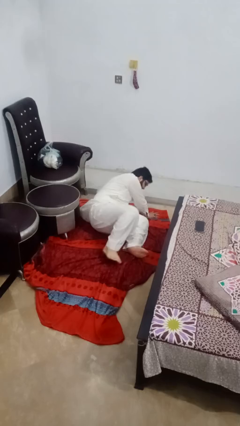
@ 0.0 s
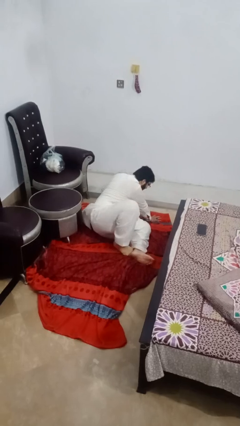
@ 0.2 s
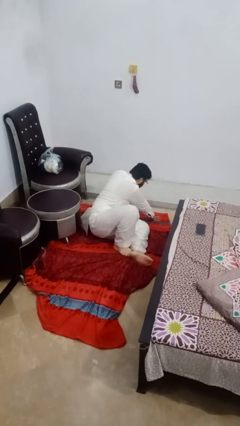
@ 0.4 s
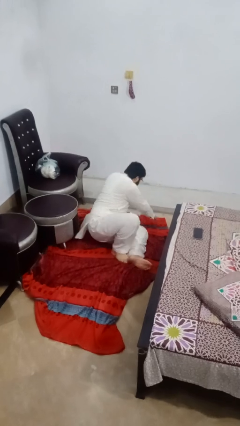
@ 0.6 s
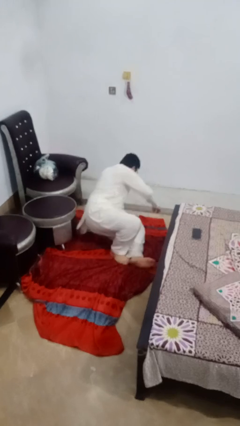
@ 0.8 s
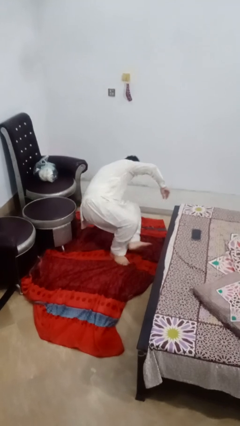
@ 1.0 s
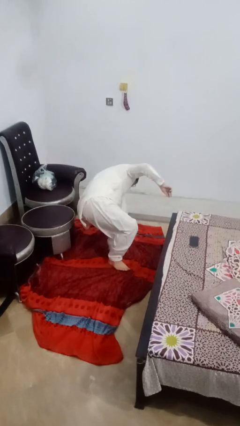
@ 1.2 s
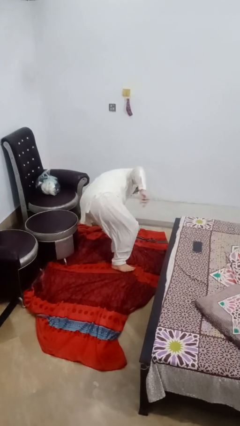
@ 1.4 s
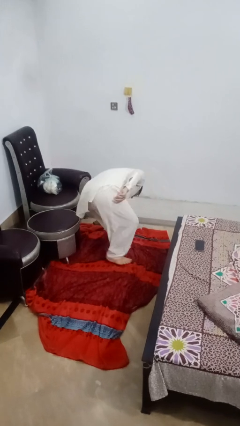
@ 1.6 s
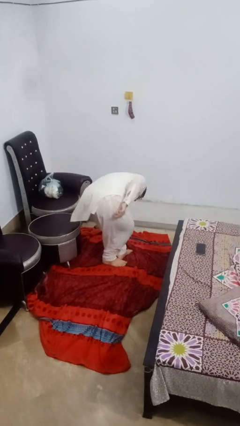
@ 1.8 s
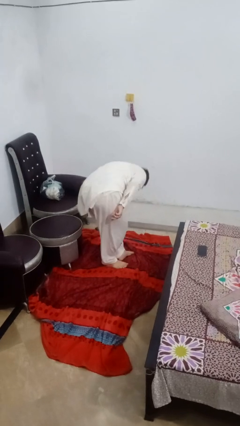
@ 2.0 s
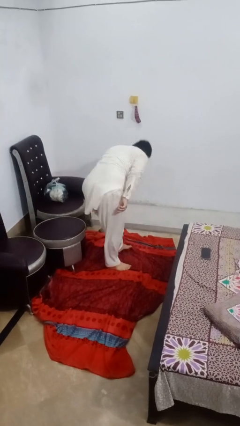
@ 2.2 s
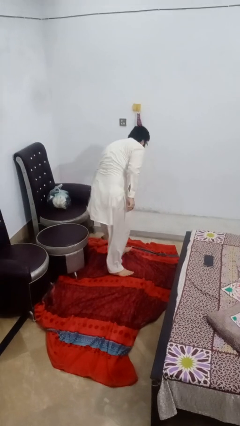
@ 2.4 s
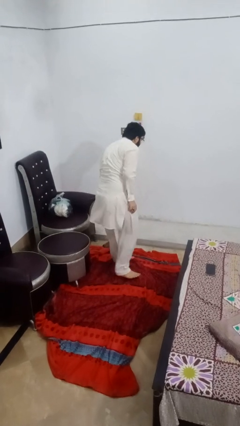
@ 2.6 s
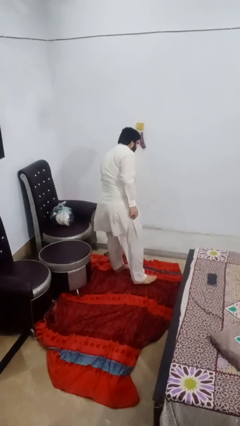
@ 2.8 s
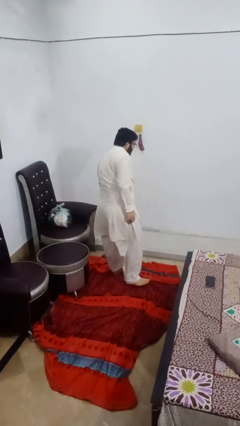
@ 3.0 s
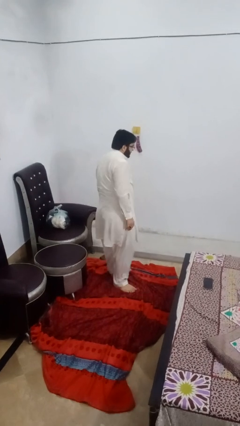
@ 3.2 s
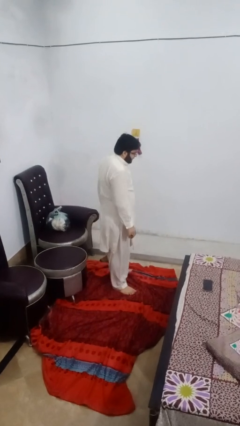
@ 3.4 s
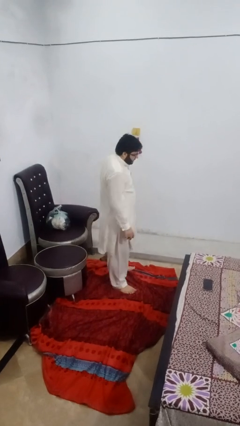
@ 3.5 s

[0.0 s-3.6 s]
person stands up from floor

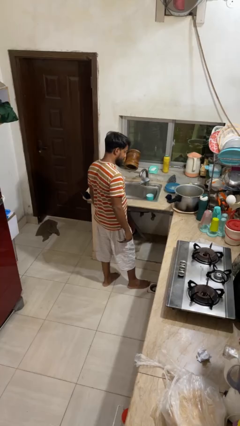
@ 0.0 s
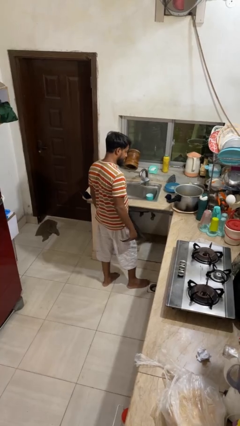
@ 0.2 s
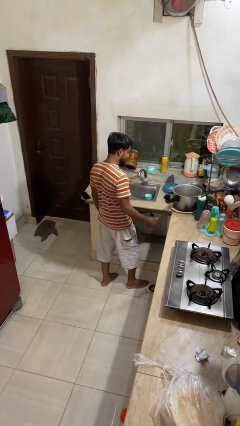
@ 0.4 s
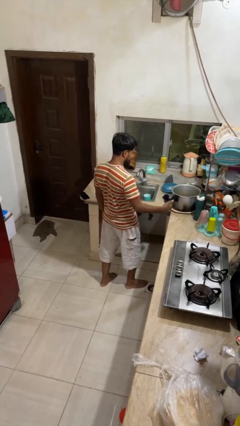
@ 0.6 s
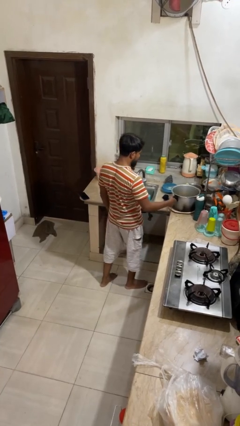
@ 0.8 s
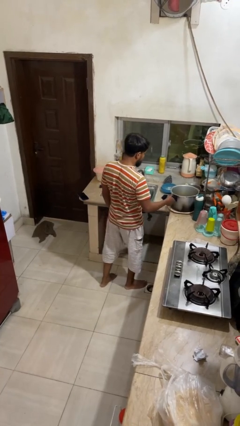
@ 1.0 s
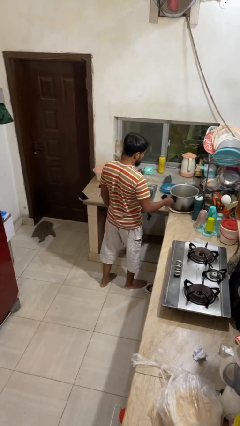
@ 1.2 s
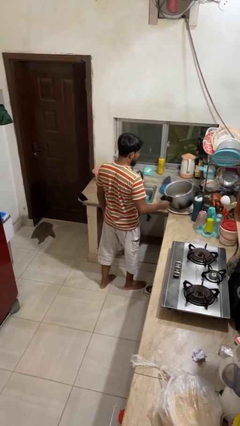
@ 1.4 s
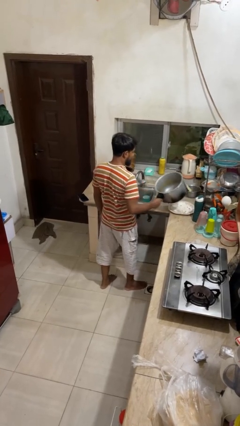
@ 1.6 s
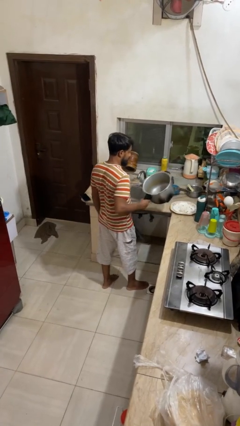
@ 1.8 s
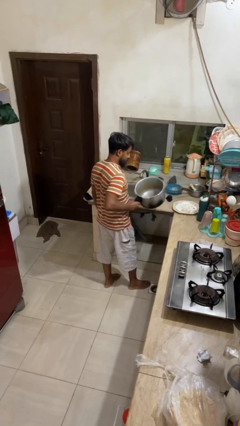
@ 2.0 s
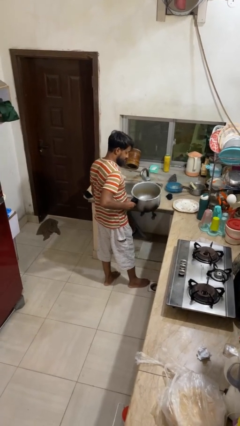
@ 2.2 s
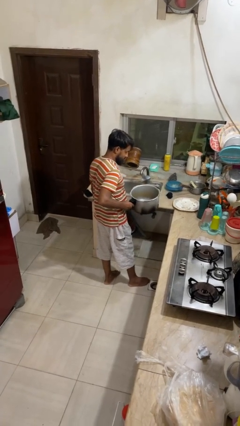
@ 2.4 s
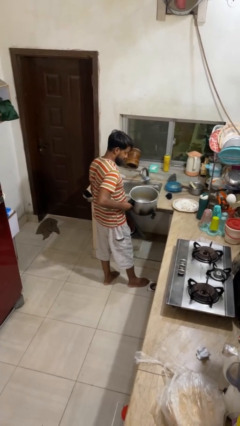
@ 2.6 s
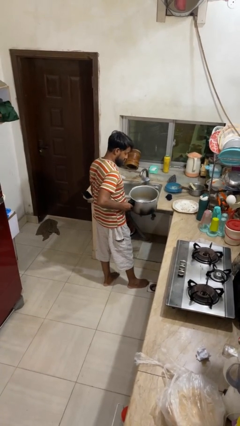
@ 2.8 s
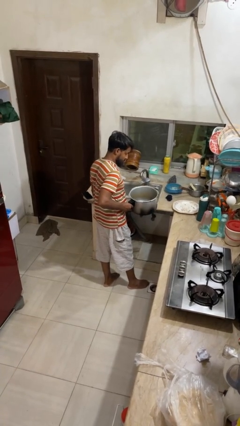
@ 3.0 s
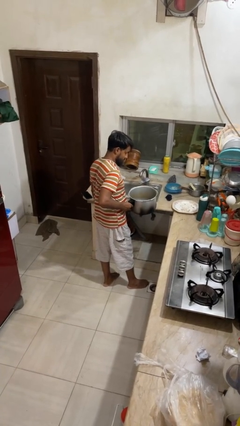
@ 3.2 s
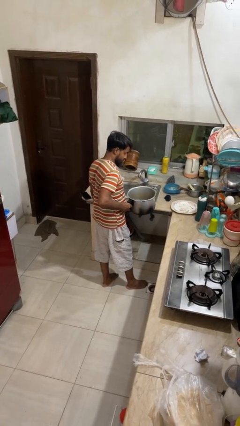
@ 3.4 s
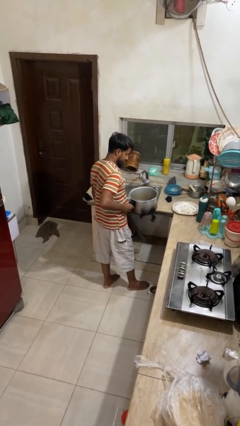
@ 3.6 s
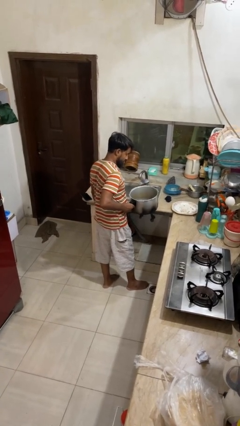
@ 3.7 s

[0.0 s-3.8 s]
person picks up object from countertop

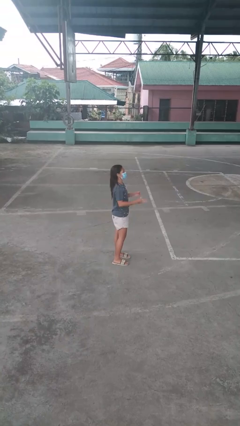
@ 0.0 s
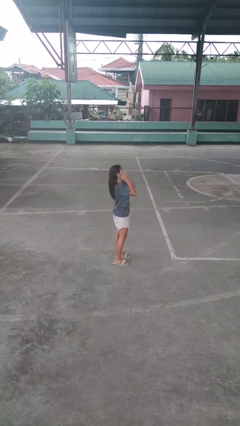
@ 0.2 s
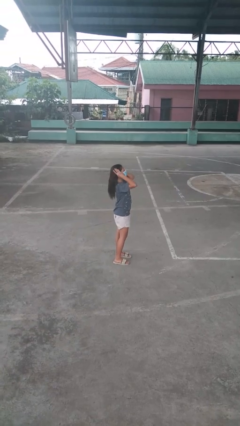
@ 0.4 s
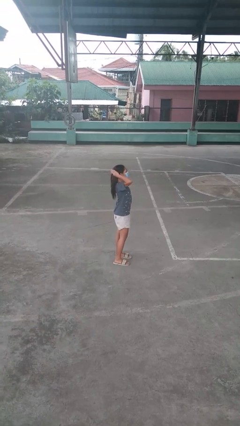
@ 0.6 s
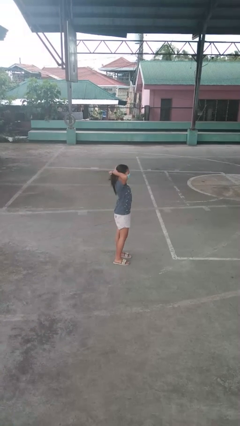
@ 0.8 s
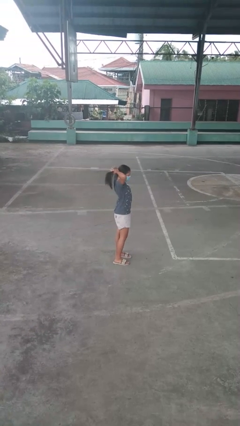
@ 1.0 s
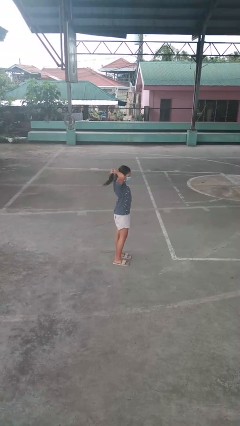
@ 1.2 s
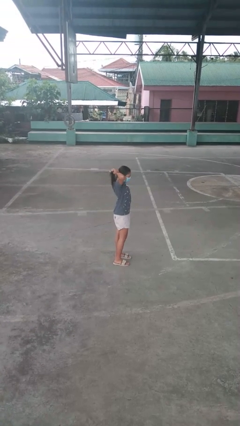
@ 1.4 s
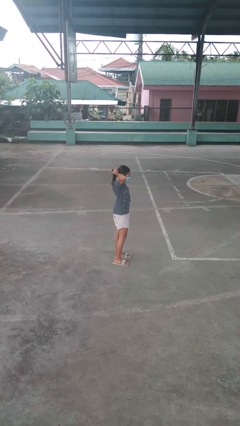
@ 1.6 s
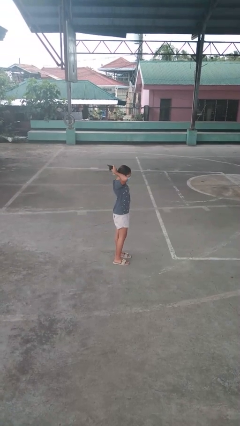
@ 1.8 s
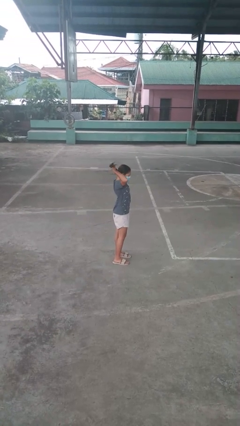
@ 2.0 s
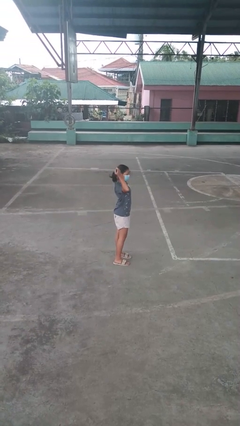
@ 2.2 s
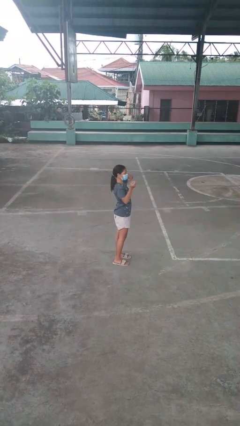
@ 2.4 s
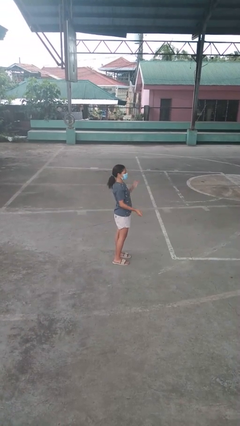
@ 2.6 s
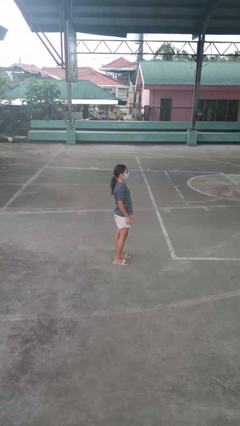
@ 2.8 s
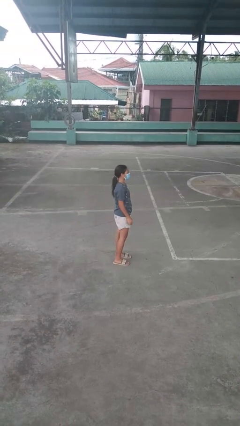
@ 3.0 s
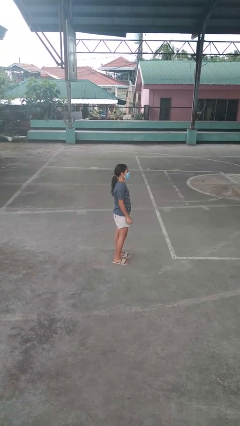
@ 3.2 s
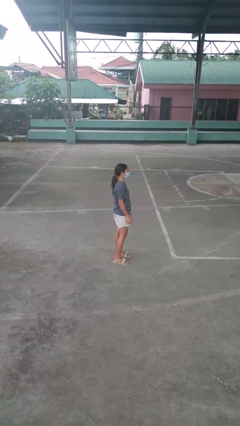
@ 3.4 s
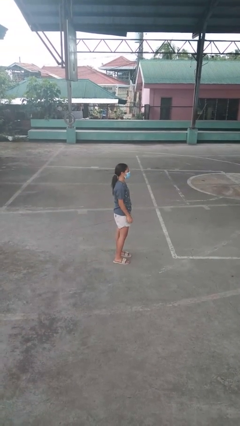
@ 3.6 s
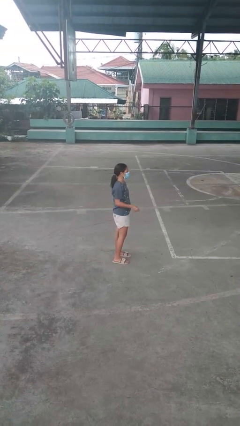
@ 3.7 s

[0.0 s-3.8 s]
person puts hair in ponytail

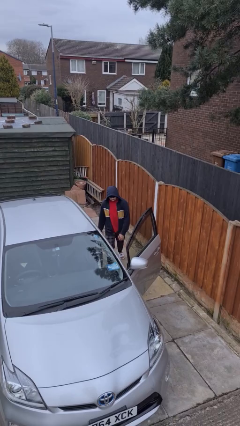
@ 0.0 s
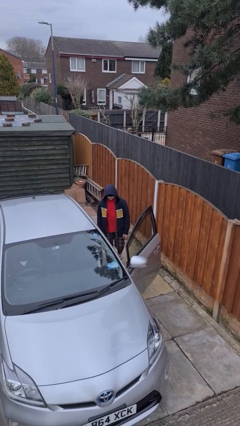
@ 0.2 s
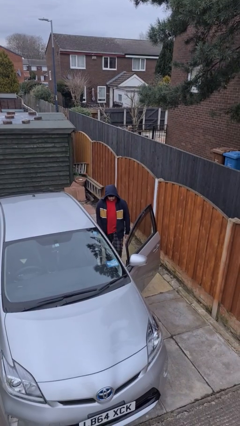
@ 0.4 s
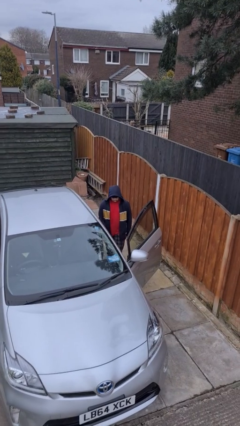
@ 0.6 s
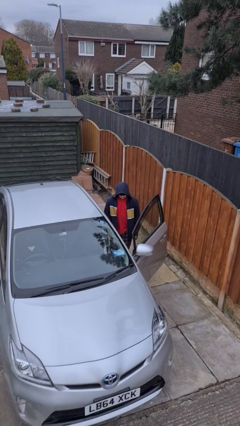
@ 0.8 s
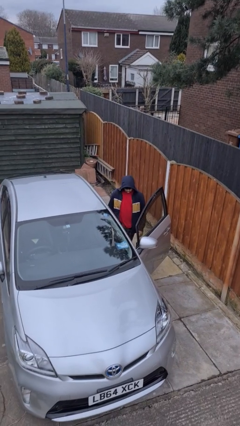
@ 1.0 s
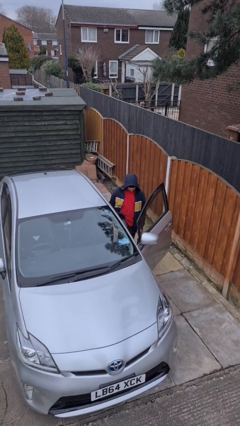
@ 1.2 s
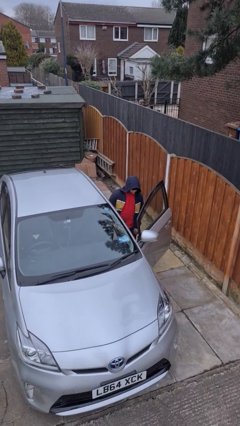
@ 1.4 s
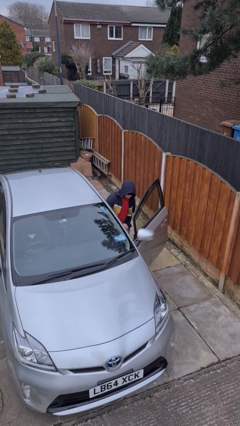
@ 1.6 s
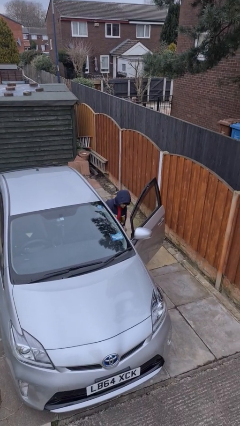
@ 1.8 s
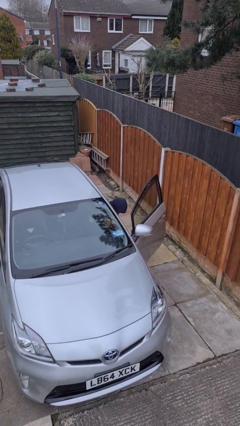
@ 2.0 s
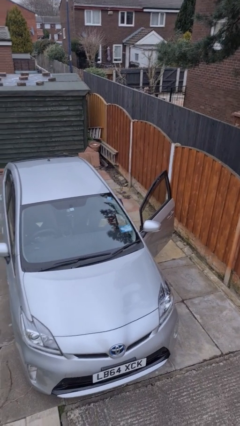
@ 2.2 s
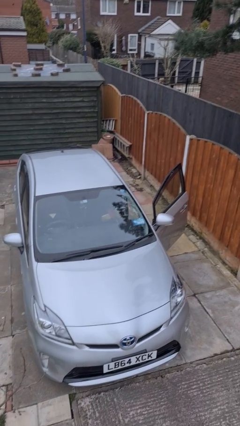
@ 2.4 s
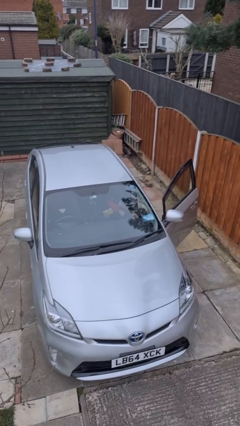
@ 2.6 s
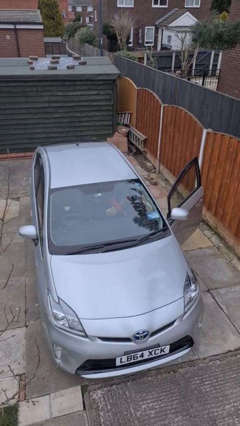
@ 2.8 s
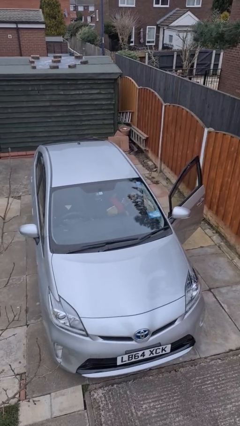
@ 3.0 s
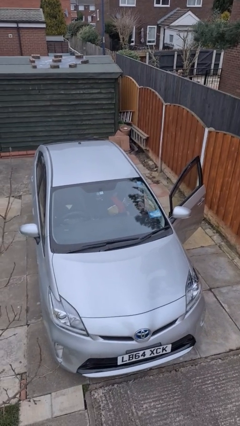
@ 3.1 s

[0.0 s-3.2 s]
person enters car

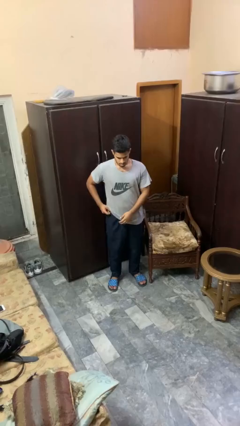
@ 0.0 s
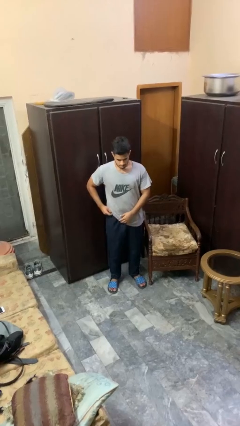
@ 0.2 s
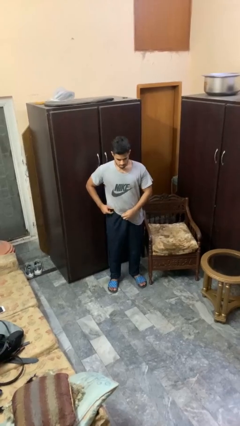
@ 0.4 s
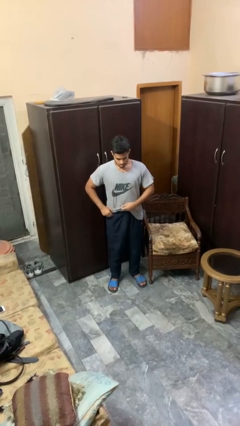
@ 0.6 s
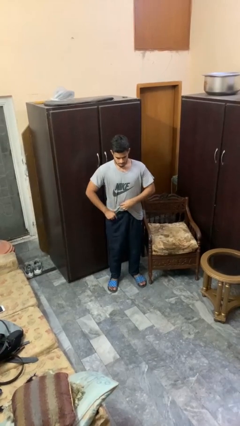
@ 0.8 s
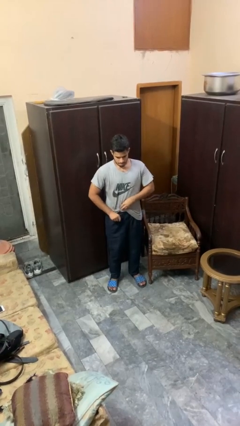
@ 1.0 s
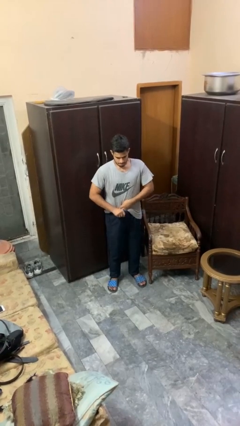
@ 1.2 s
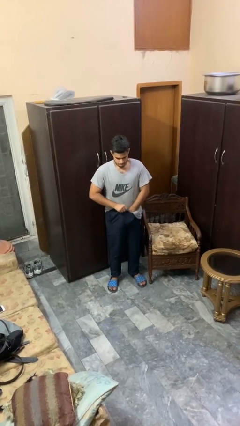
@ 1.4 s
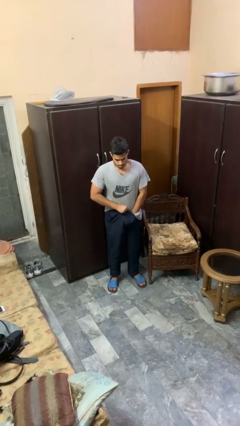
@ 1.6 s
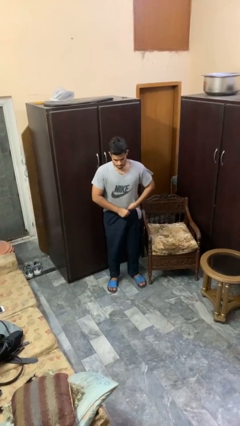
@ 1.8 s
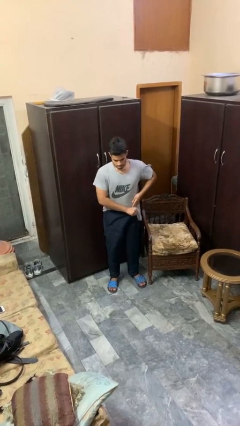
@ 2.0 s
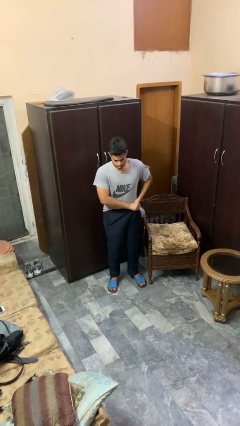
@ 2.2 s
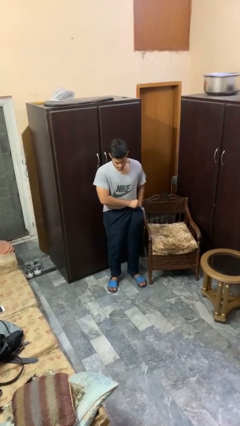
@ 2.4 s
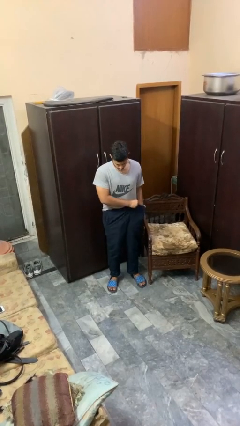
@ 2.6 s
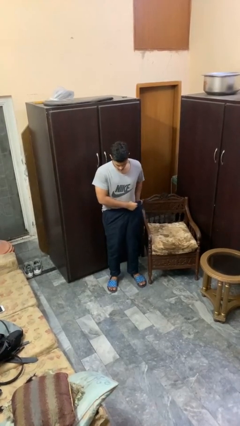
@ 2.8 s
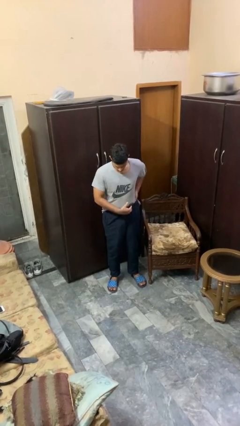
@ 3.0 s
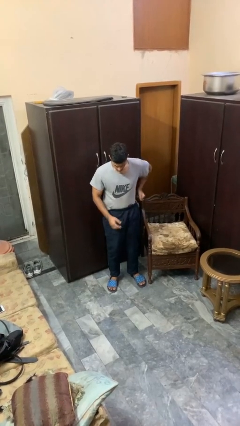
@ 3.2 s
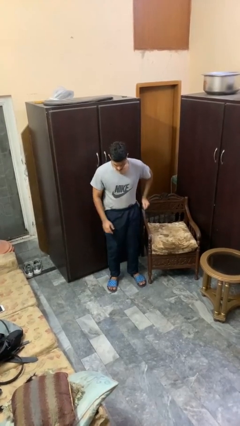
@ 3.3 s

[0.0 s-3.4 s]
person tucks in shirt
